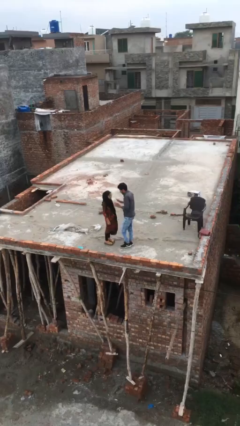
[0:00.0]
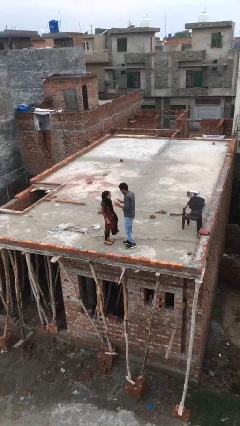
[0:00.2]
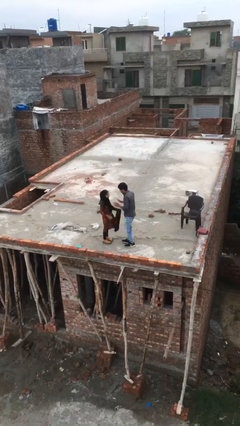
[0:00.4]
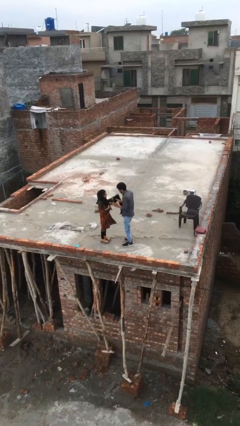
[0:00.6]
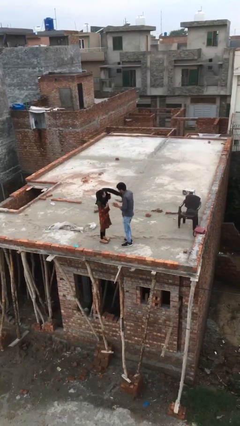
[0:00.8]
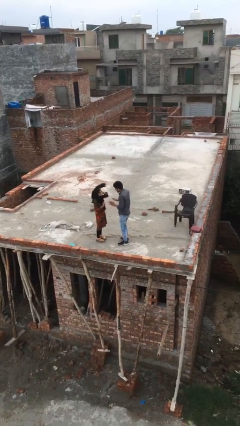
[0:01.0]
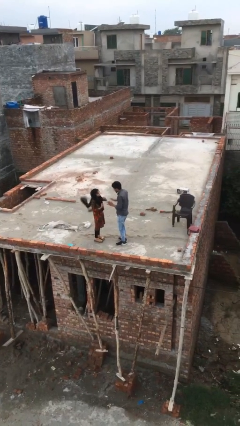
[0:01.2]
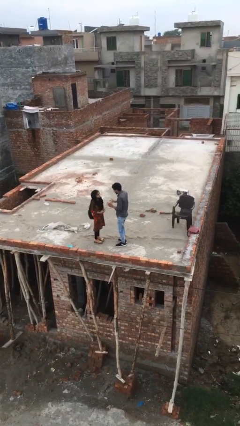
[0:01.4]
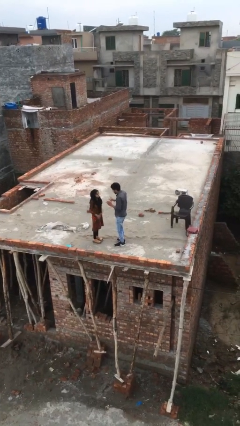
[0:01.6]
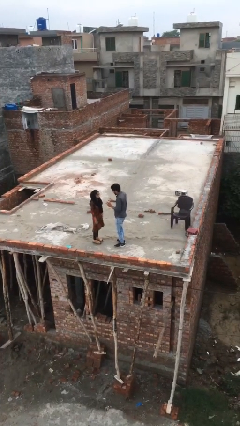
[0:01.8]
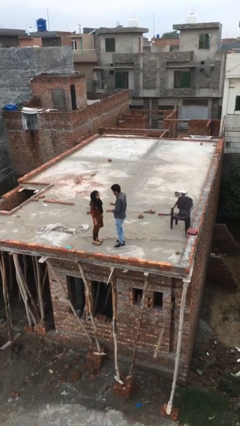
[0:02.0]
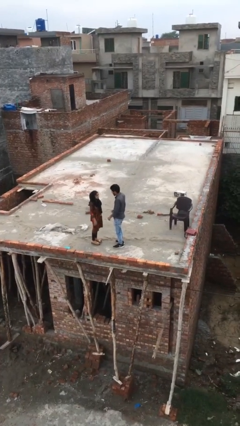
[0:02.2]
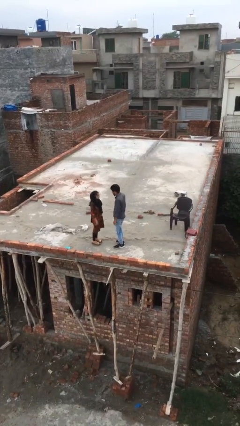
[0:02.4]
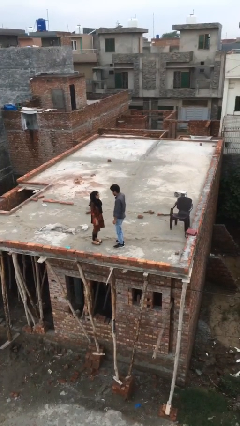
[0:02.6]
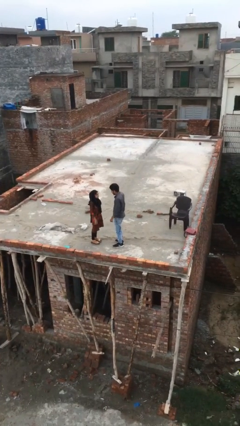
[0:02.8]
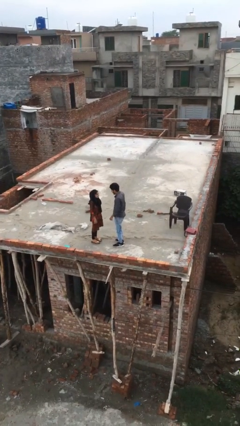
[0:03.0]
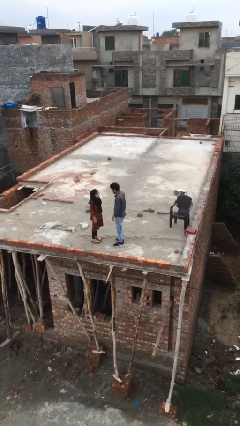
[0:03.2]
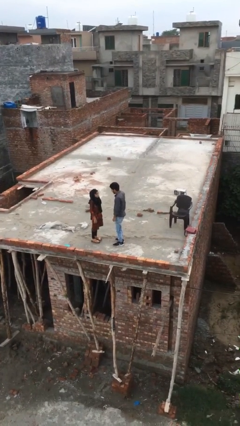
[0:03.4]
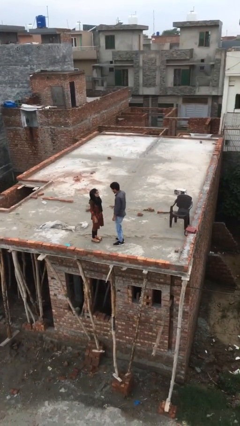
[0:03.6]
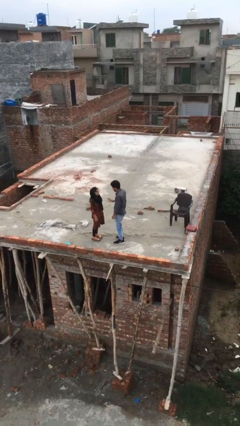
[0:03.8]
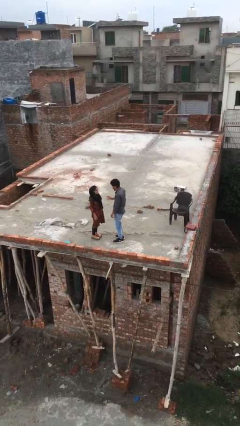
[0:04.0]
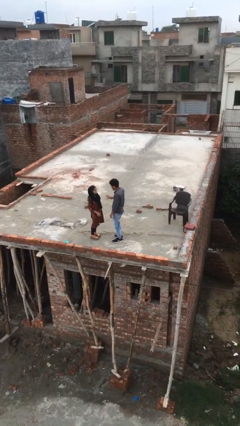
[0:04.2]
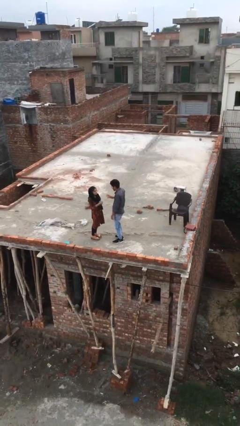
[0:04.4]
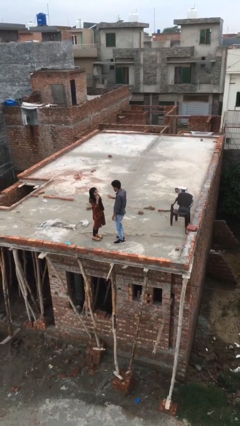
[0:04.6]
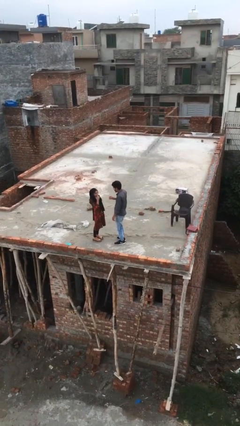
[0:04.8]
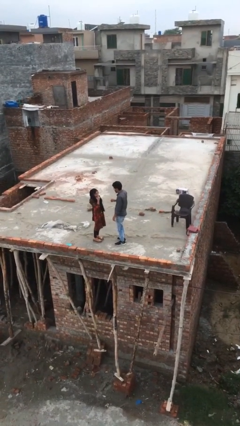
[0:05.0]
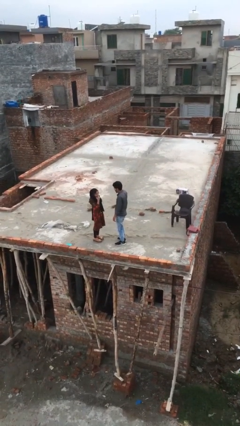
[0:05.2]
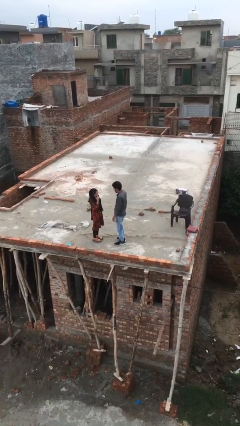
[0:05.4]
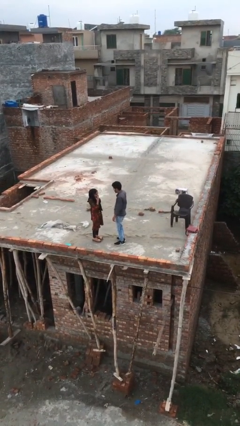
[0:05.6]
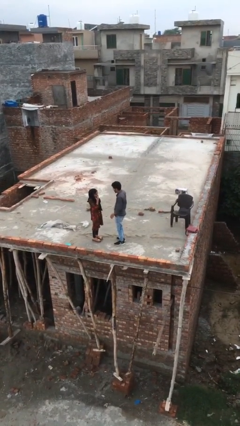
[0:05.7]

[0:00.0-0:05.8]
person talks to person

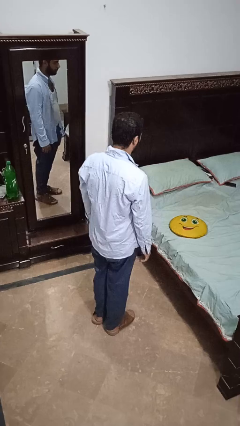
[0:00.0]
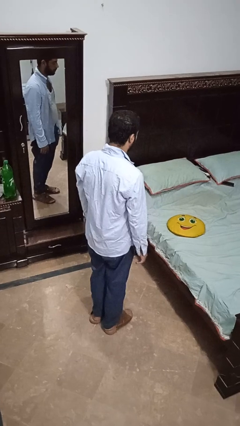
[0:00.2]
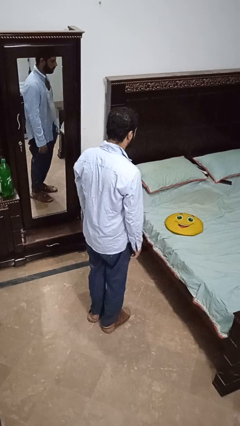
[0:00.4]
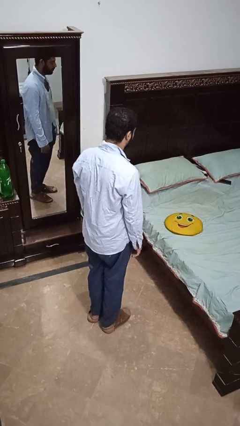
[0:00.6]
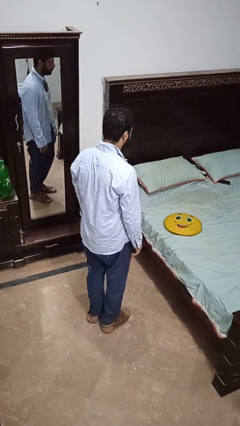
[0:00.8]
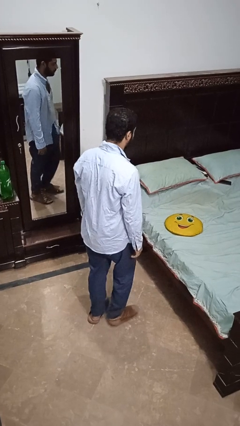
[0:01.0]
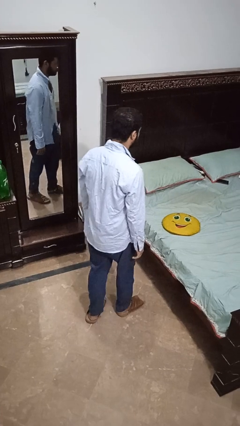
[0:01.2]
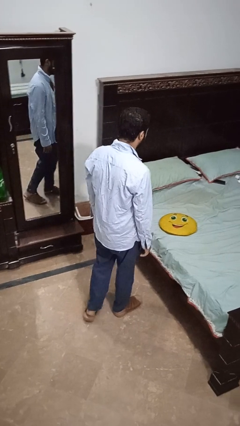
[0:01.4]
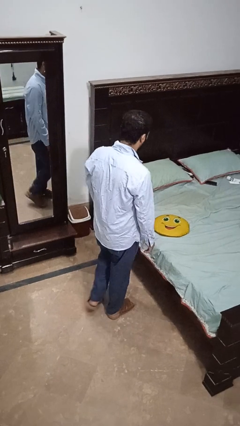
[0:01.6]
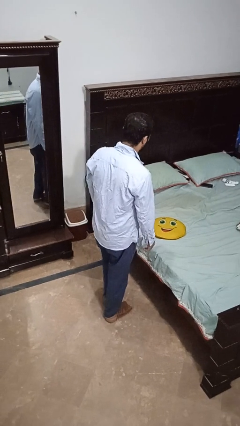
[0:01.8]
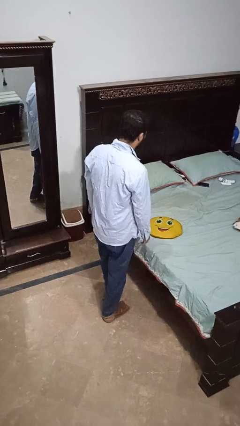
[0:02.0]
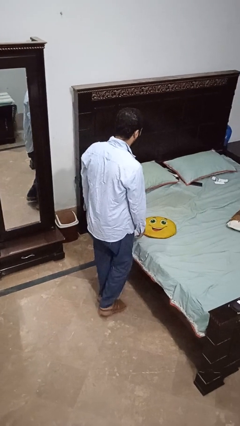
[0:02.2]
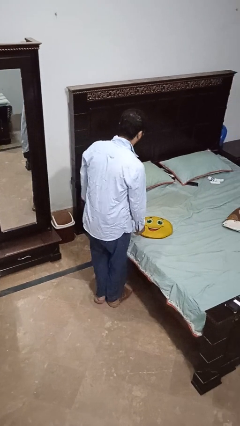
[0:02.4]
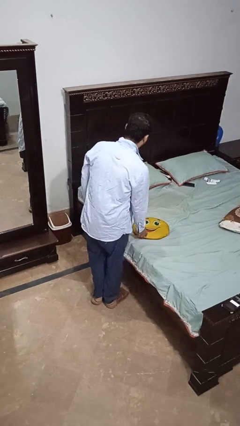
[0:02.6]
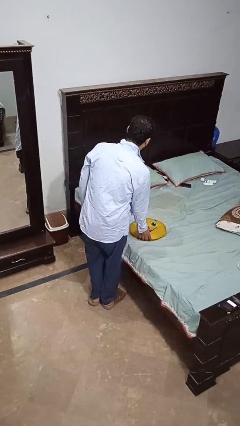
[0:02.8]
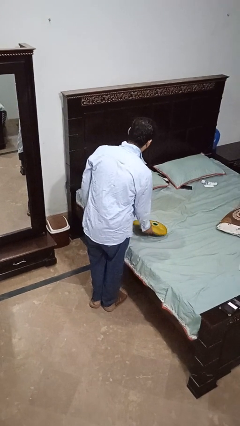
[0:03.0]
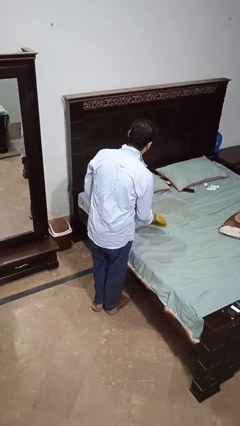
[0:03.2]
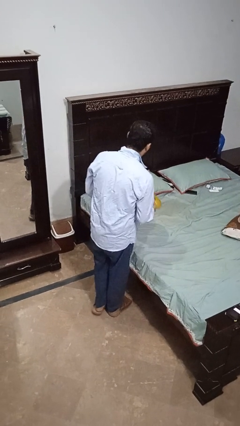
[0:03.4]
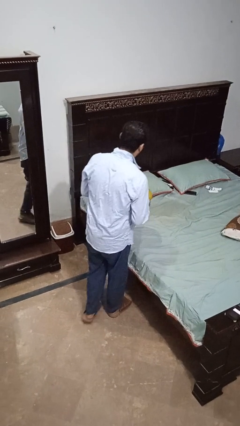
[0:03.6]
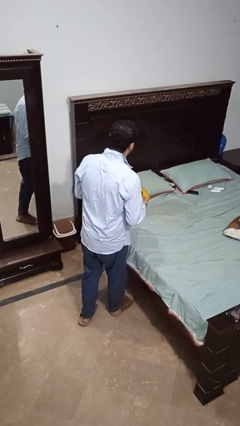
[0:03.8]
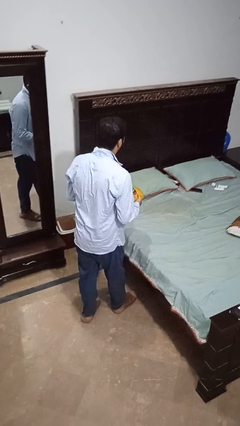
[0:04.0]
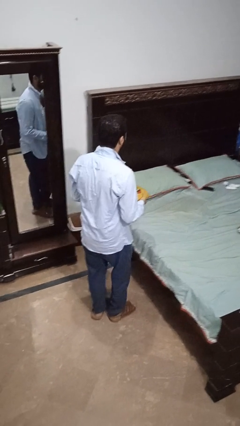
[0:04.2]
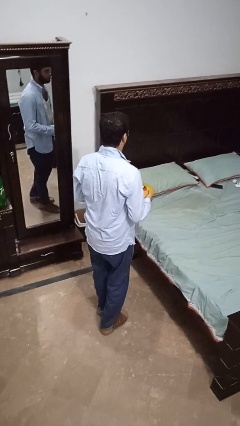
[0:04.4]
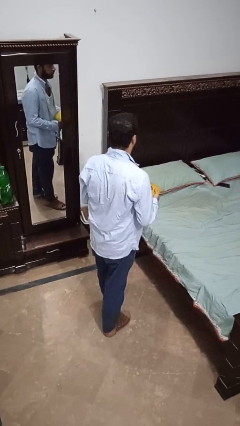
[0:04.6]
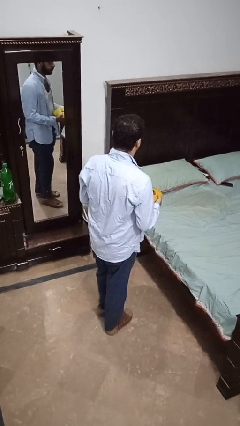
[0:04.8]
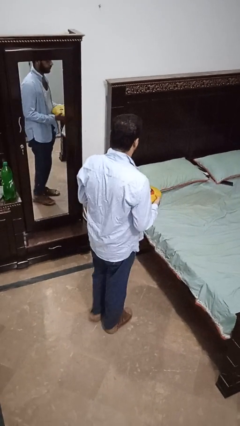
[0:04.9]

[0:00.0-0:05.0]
person picks up object from bed

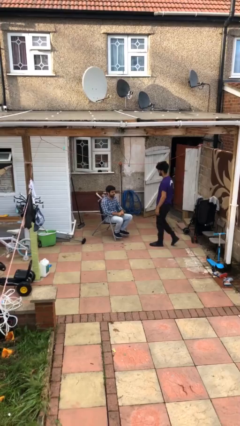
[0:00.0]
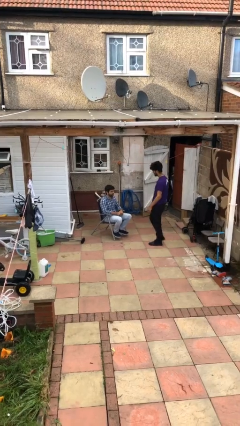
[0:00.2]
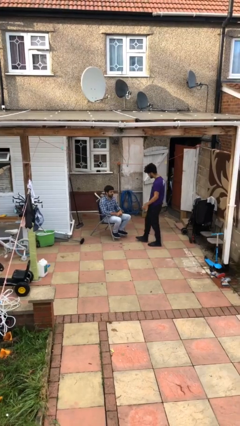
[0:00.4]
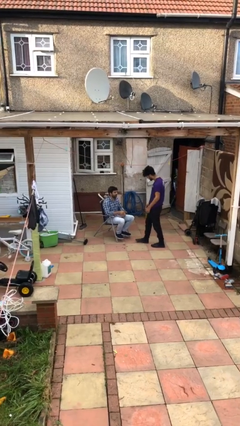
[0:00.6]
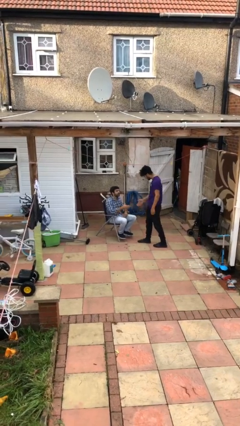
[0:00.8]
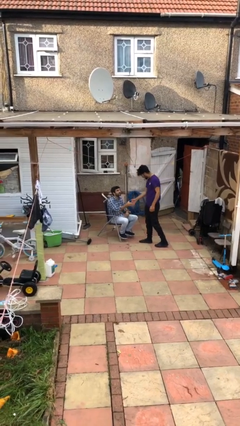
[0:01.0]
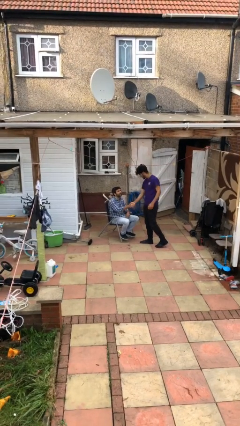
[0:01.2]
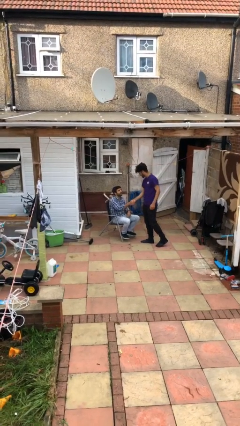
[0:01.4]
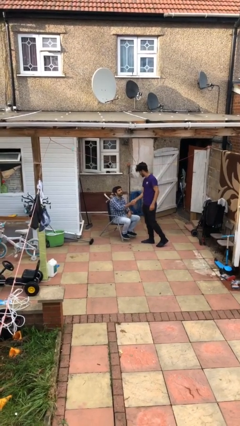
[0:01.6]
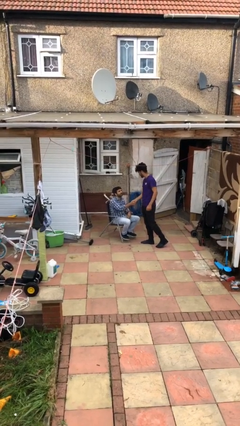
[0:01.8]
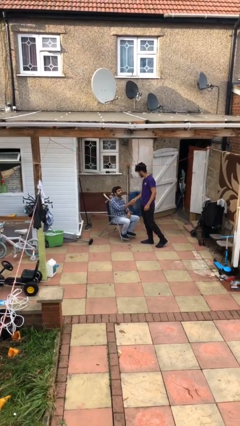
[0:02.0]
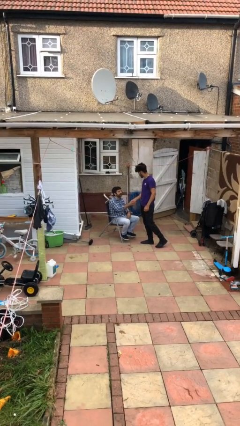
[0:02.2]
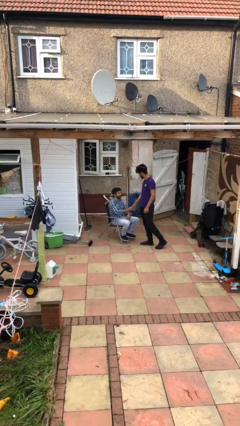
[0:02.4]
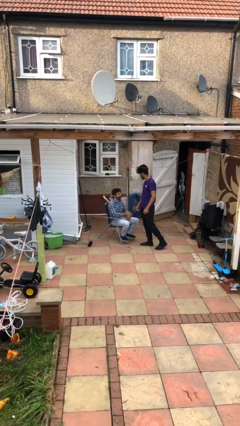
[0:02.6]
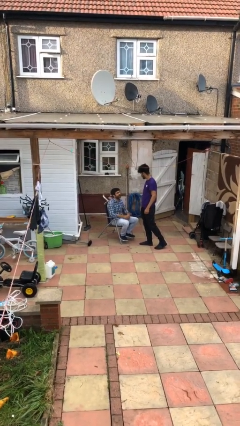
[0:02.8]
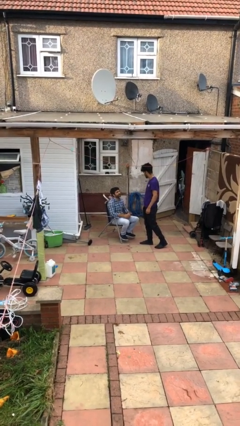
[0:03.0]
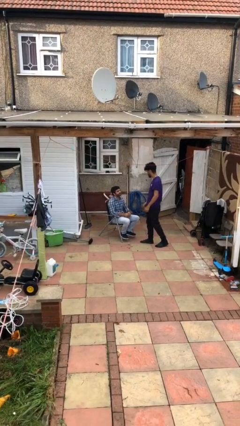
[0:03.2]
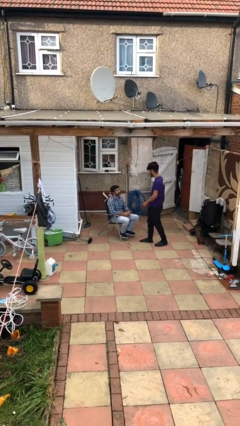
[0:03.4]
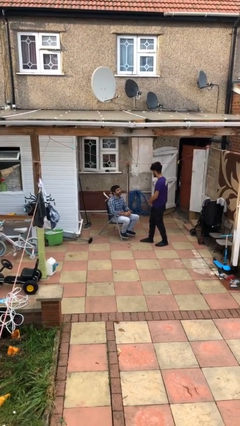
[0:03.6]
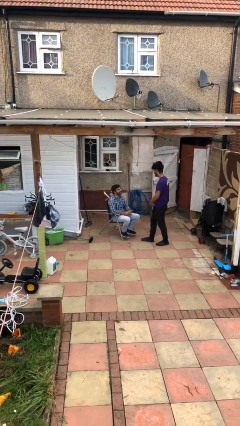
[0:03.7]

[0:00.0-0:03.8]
person shakes hand

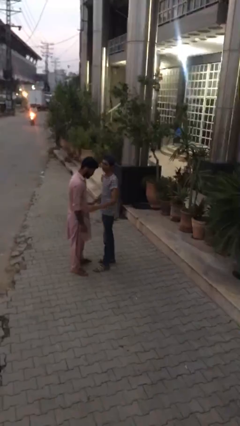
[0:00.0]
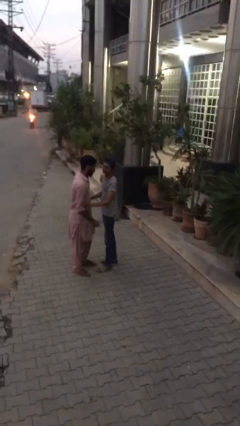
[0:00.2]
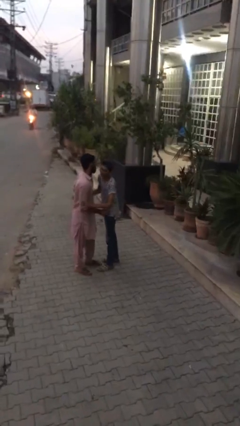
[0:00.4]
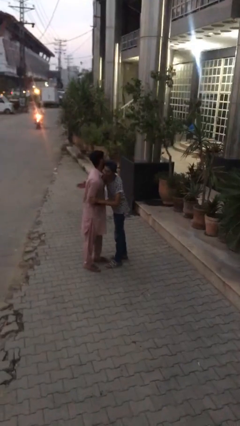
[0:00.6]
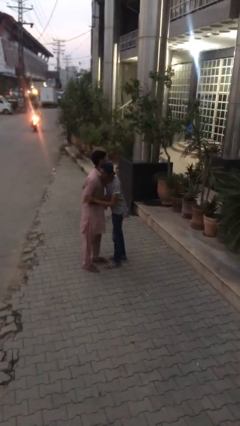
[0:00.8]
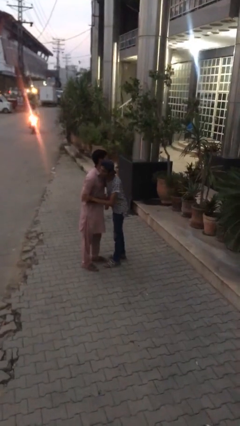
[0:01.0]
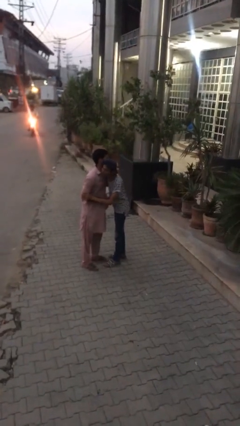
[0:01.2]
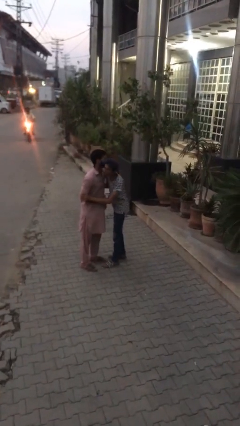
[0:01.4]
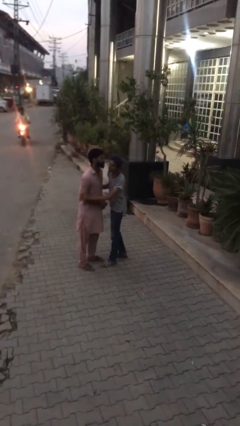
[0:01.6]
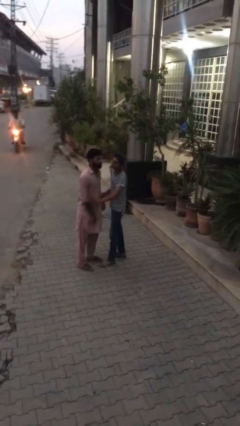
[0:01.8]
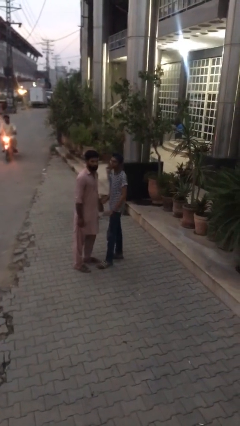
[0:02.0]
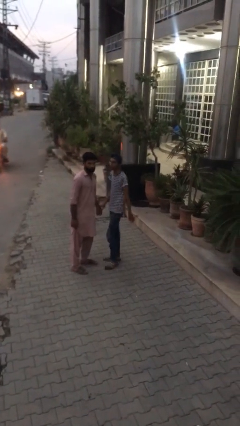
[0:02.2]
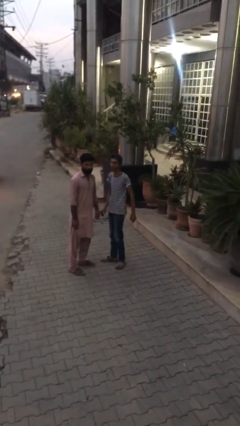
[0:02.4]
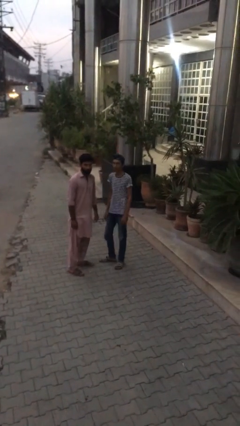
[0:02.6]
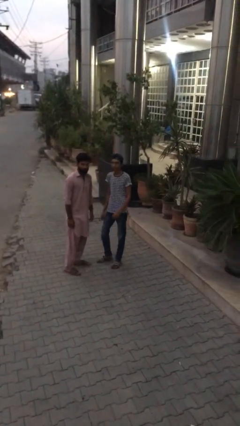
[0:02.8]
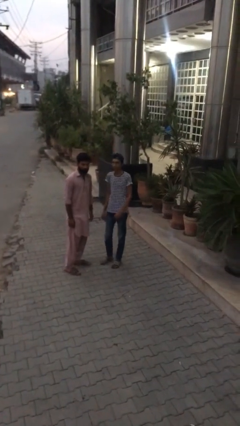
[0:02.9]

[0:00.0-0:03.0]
person embraces person
